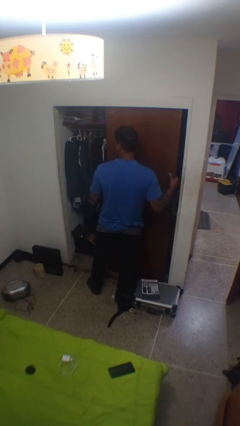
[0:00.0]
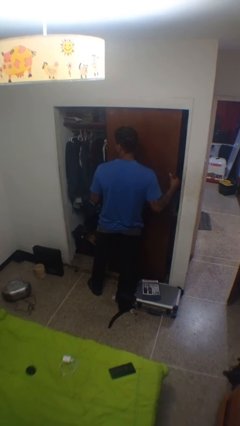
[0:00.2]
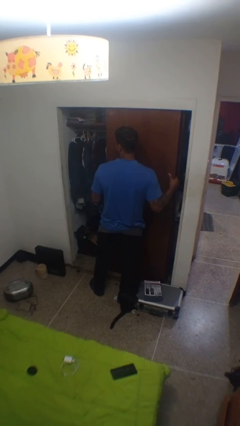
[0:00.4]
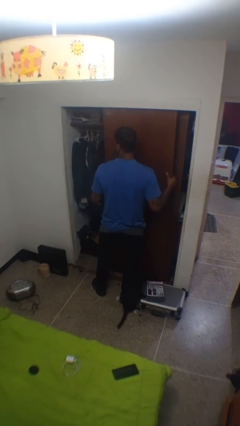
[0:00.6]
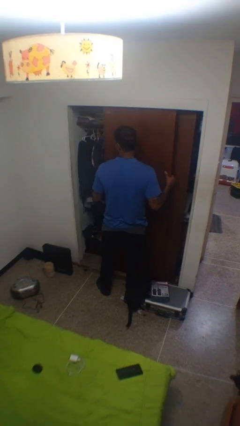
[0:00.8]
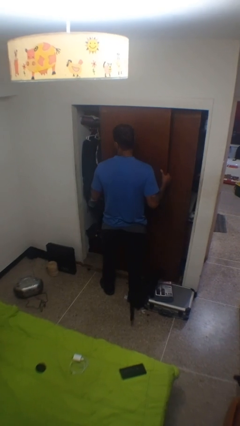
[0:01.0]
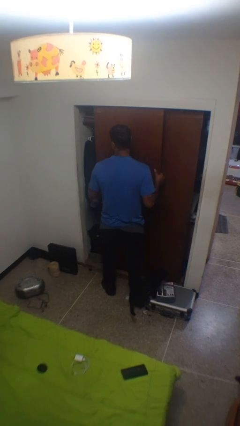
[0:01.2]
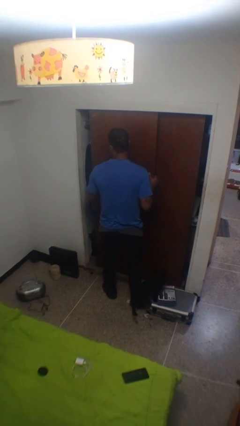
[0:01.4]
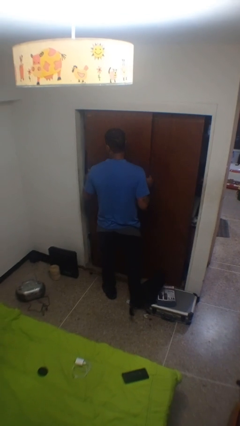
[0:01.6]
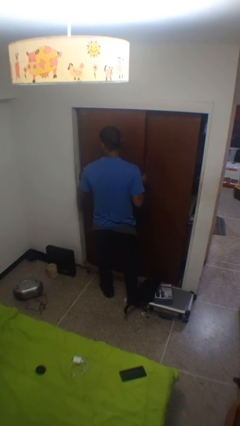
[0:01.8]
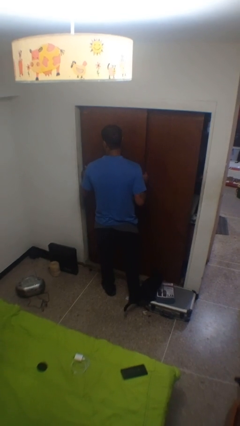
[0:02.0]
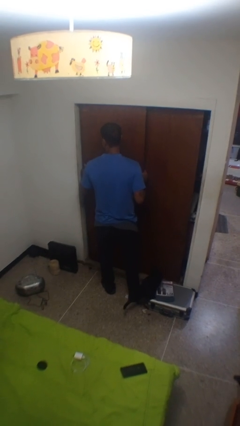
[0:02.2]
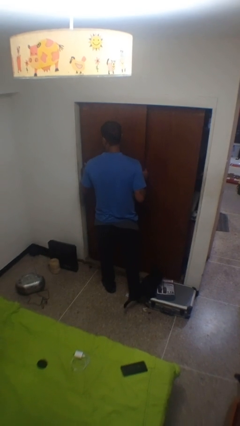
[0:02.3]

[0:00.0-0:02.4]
person closes closet door

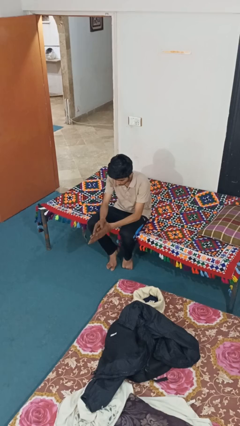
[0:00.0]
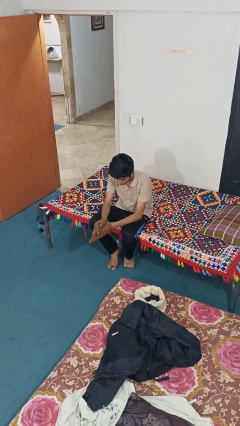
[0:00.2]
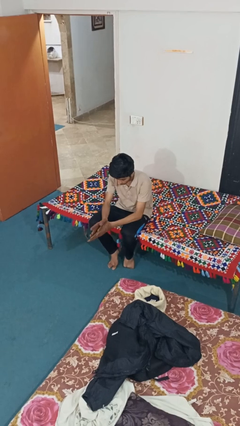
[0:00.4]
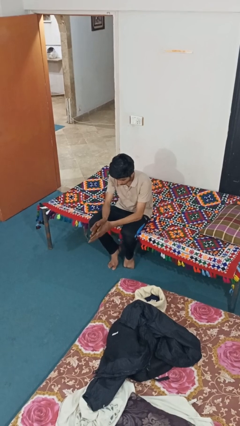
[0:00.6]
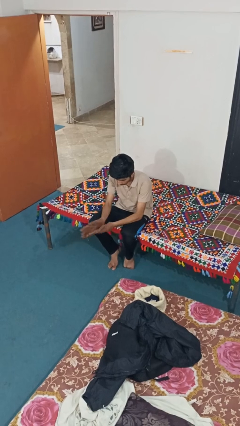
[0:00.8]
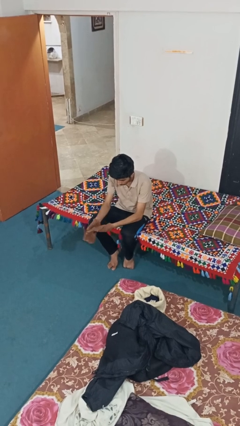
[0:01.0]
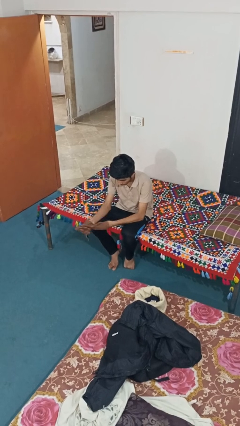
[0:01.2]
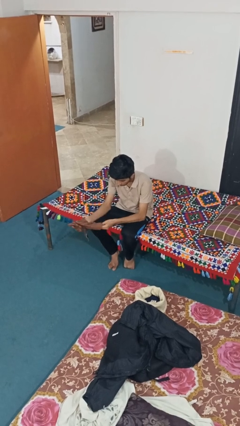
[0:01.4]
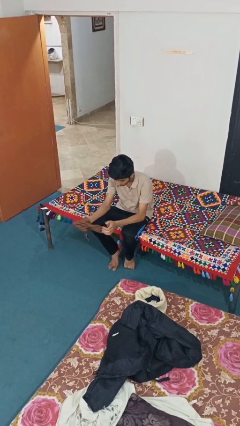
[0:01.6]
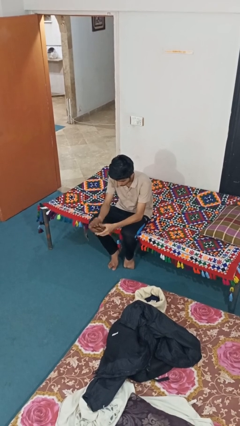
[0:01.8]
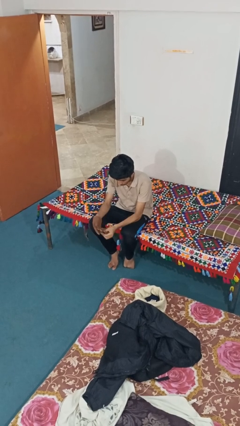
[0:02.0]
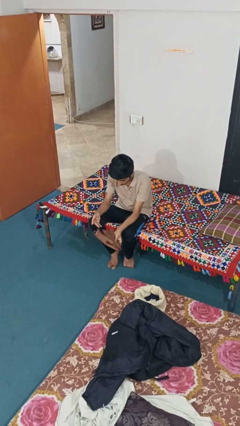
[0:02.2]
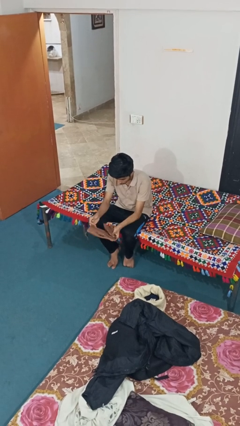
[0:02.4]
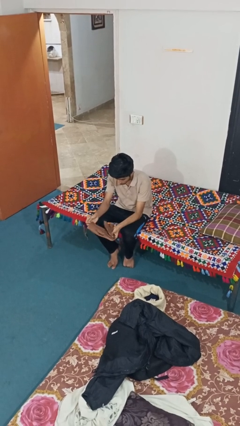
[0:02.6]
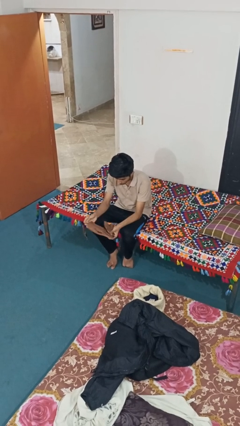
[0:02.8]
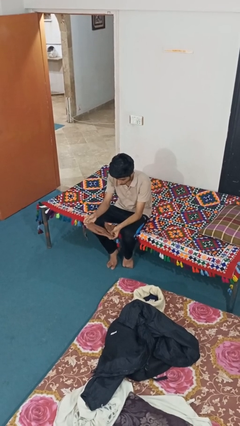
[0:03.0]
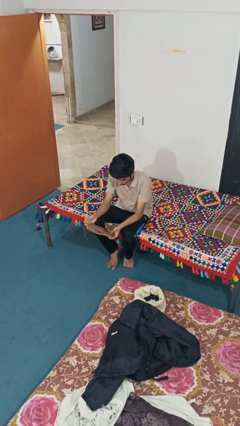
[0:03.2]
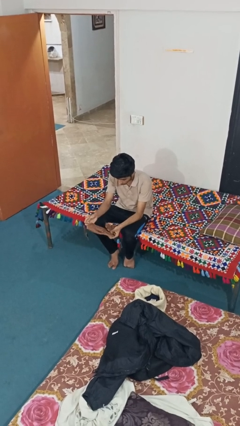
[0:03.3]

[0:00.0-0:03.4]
person takes off gloves

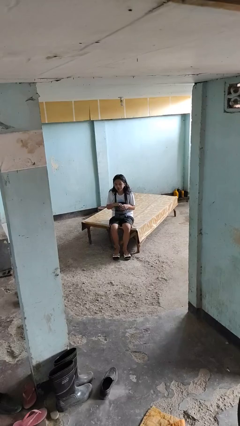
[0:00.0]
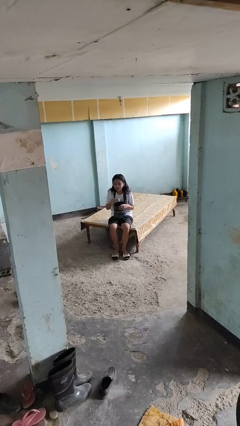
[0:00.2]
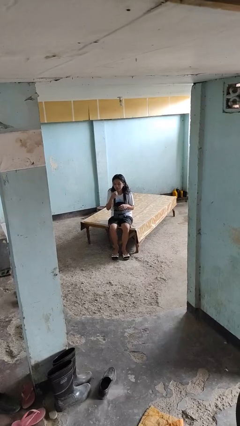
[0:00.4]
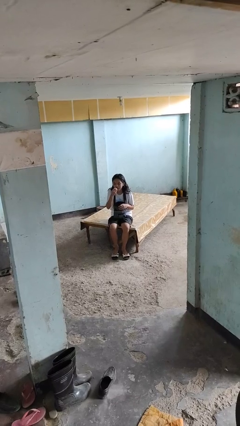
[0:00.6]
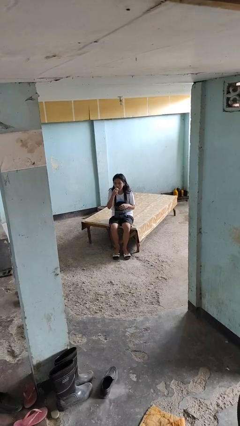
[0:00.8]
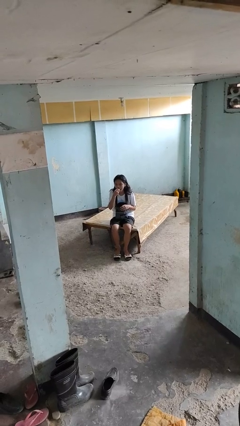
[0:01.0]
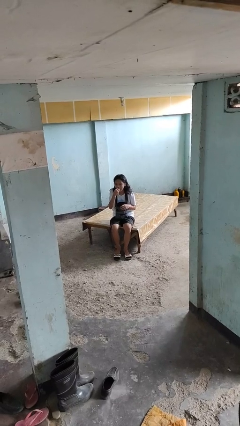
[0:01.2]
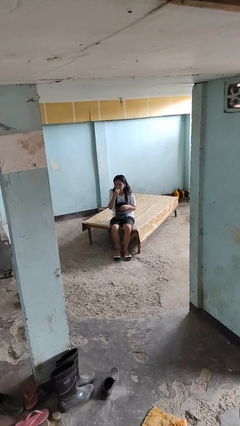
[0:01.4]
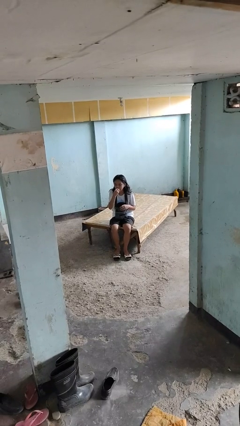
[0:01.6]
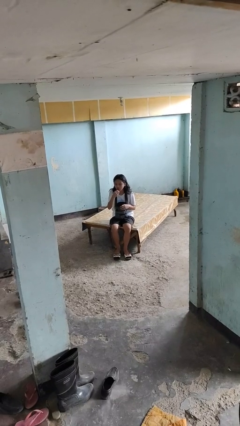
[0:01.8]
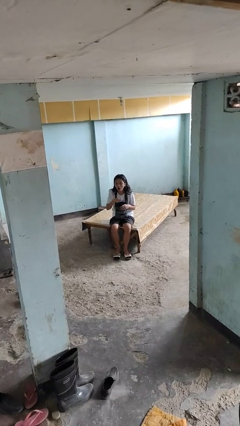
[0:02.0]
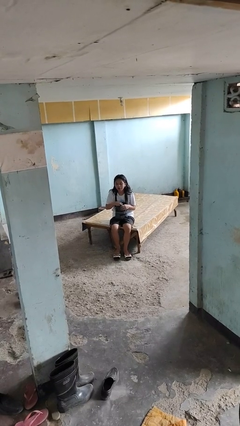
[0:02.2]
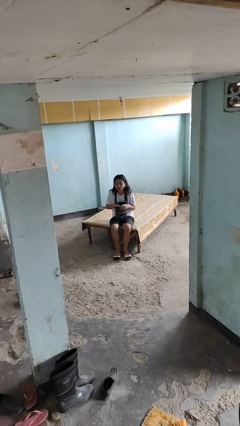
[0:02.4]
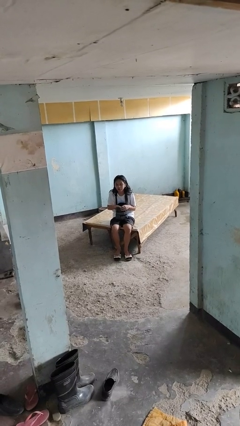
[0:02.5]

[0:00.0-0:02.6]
person eats snack from bag

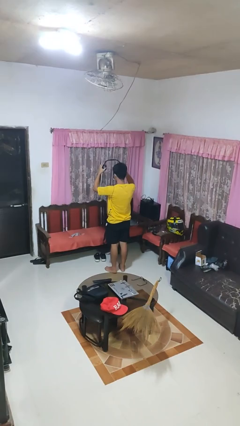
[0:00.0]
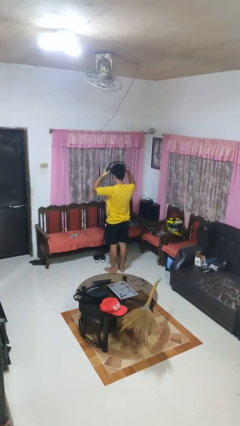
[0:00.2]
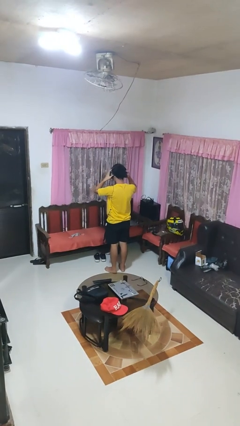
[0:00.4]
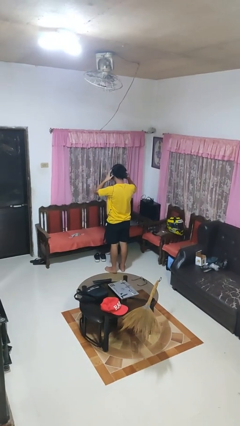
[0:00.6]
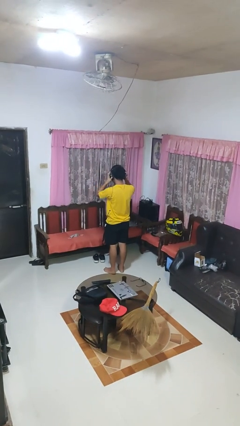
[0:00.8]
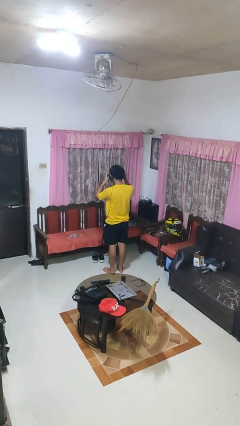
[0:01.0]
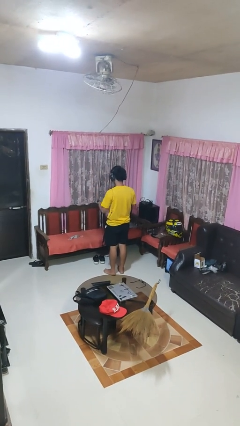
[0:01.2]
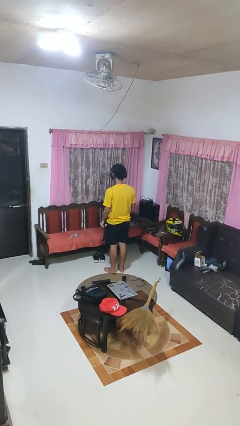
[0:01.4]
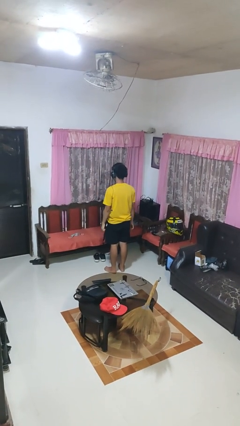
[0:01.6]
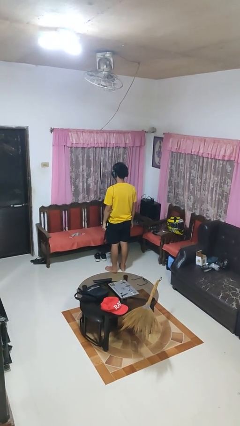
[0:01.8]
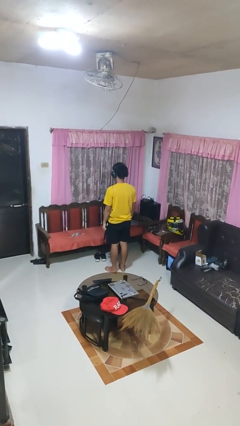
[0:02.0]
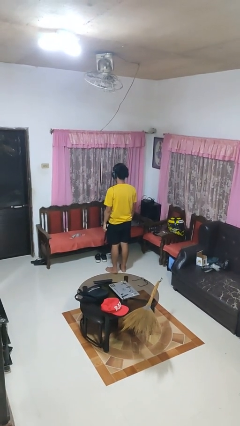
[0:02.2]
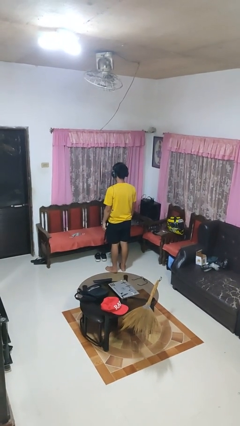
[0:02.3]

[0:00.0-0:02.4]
person puts on headphones

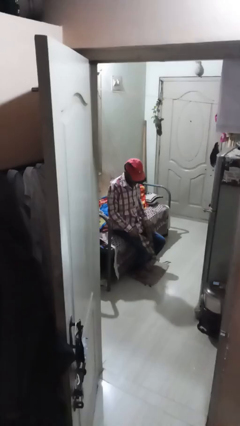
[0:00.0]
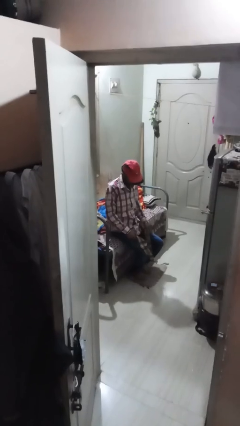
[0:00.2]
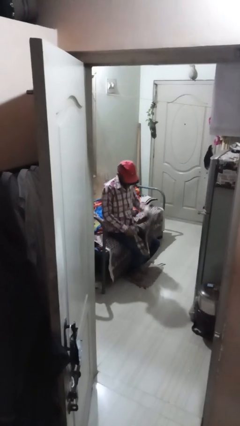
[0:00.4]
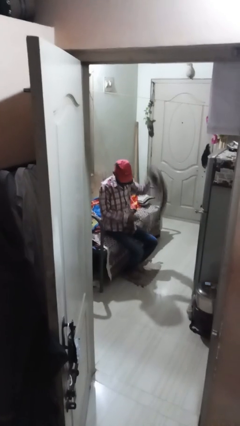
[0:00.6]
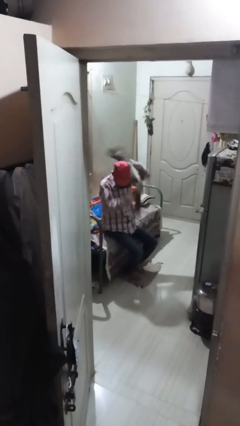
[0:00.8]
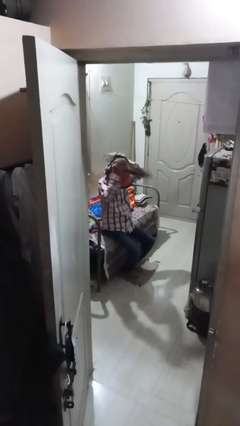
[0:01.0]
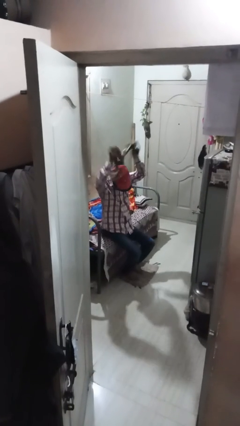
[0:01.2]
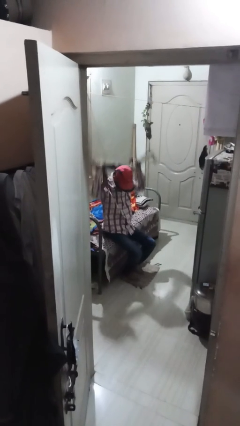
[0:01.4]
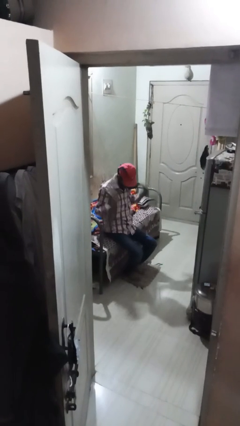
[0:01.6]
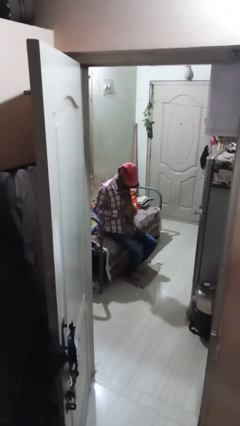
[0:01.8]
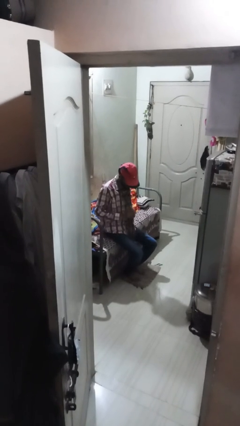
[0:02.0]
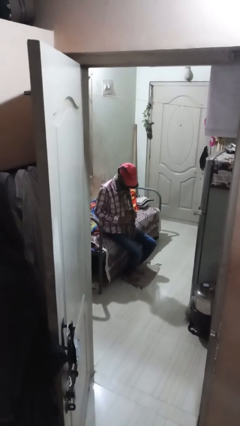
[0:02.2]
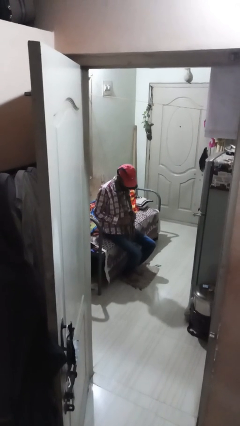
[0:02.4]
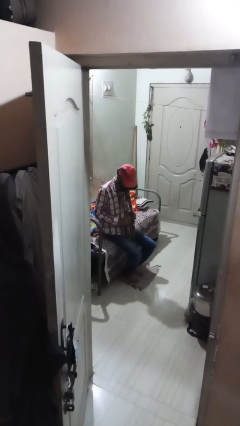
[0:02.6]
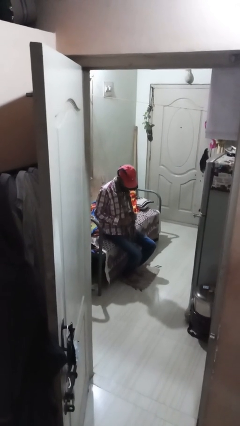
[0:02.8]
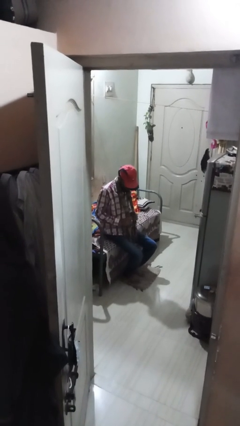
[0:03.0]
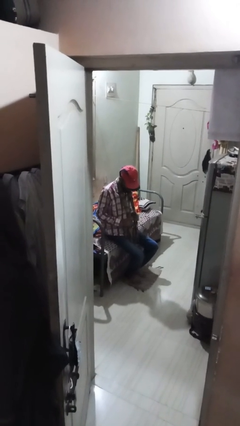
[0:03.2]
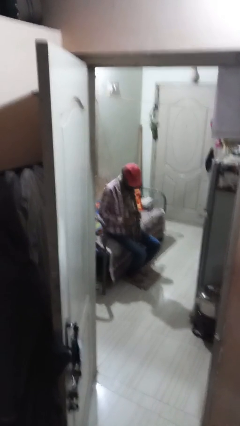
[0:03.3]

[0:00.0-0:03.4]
person puts on scarf

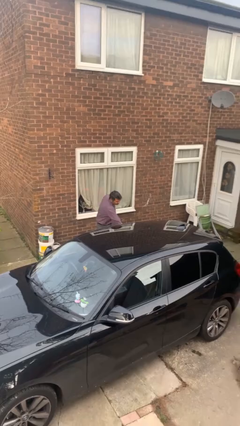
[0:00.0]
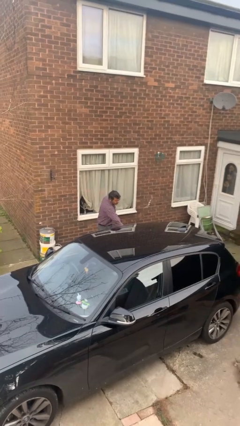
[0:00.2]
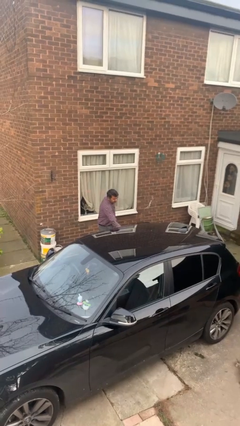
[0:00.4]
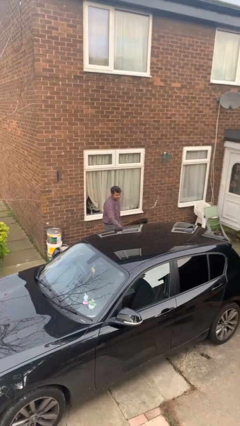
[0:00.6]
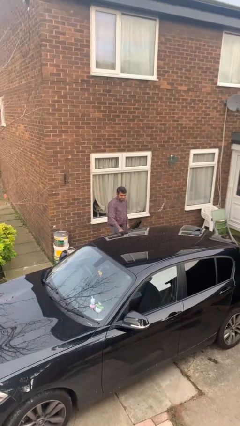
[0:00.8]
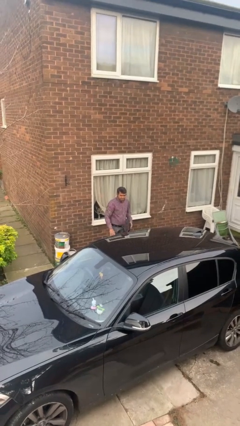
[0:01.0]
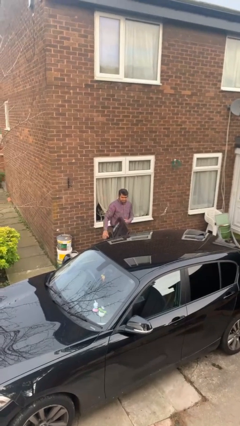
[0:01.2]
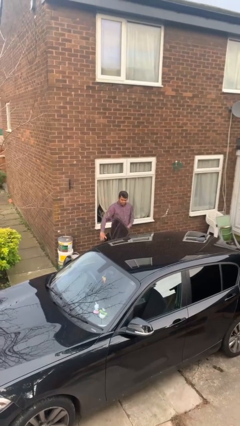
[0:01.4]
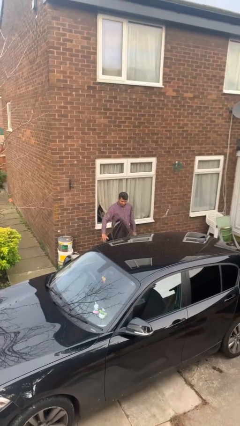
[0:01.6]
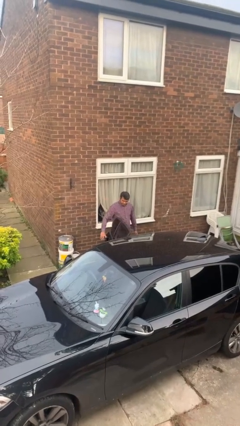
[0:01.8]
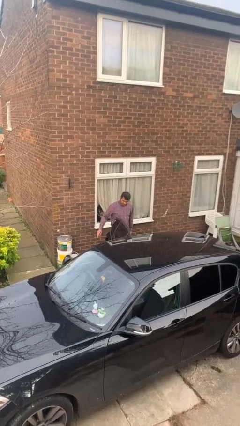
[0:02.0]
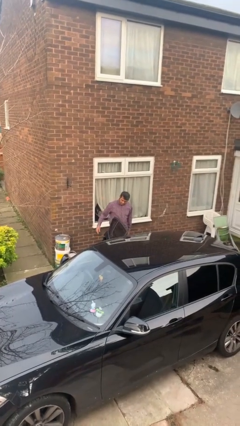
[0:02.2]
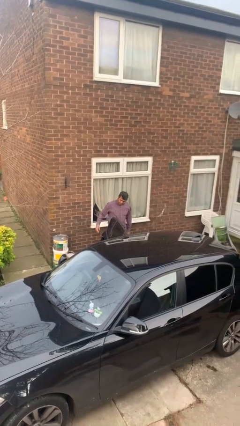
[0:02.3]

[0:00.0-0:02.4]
person opens car door

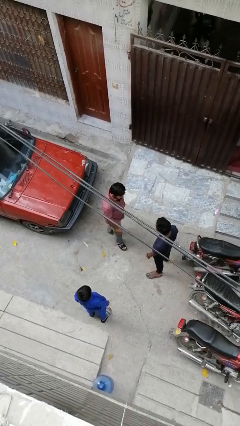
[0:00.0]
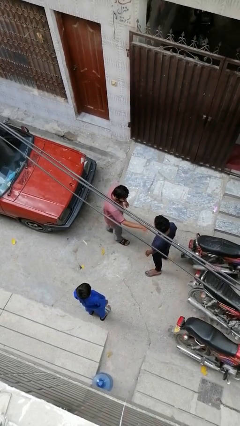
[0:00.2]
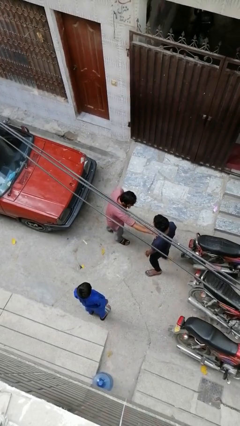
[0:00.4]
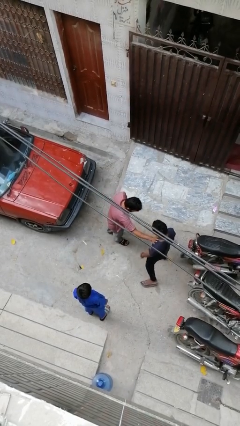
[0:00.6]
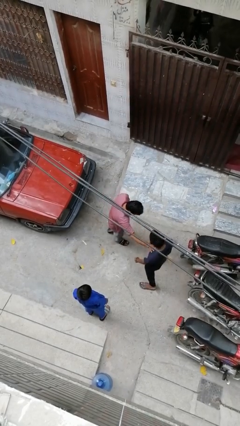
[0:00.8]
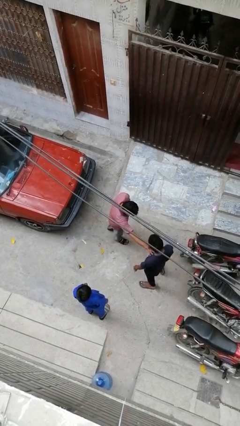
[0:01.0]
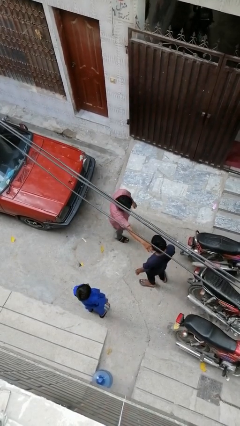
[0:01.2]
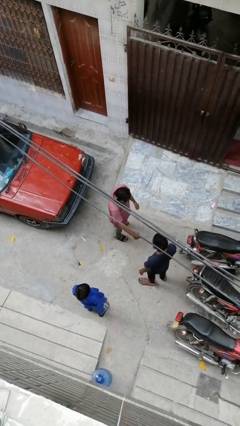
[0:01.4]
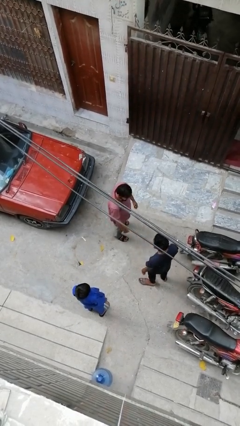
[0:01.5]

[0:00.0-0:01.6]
person shoves person
